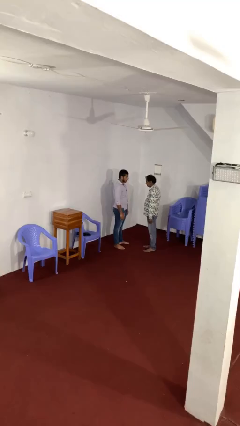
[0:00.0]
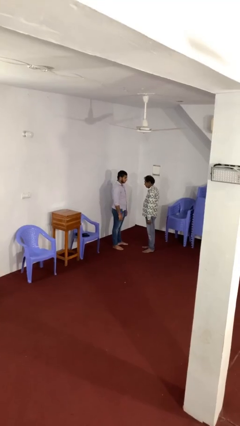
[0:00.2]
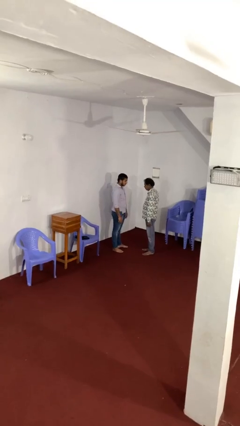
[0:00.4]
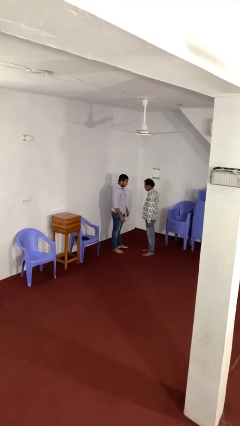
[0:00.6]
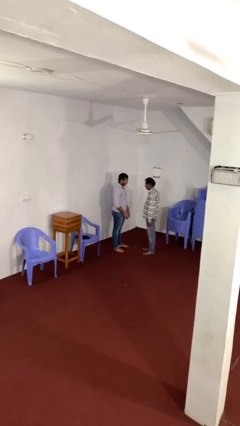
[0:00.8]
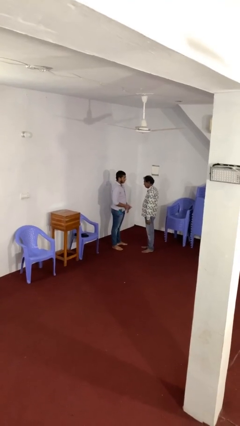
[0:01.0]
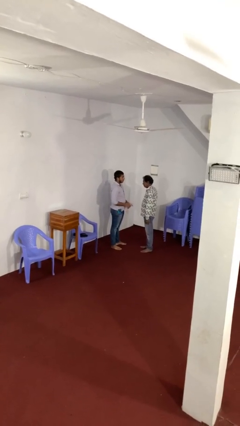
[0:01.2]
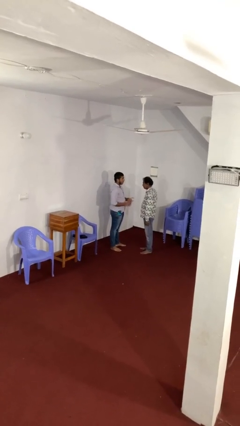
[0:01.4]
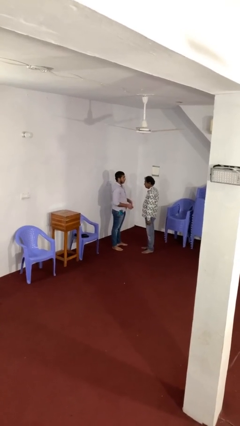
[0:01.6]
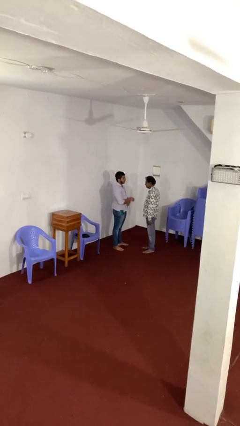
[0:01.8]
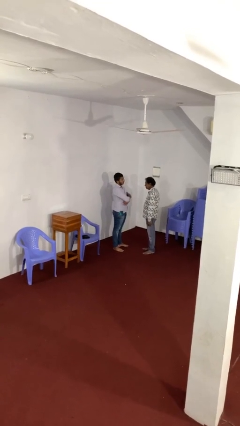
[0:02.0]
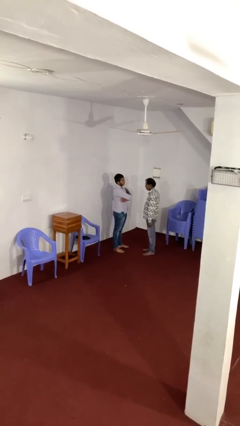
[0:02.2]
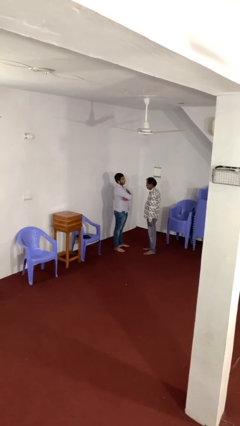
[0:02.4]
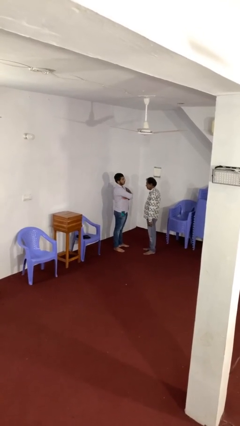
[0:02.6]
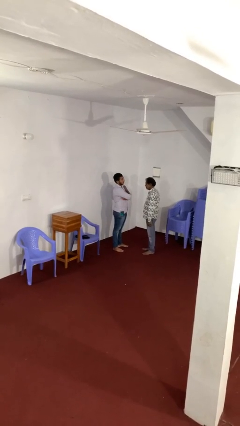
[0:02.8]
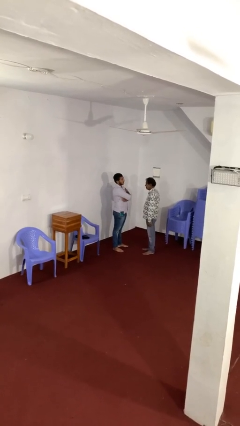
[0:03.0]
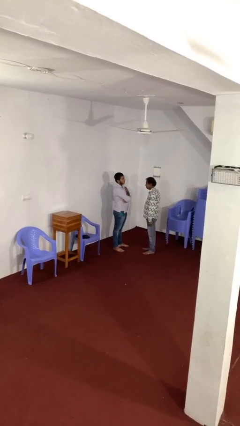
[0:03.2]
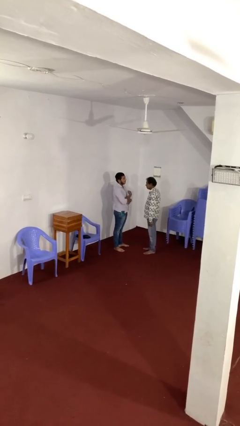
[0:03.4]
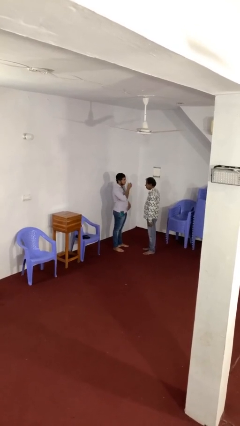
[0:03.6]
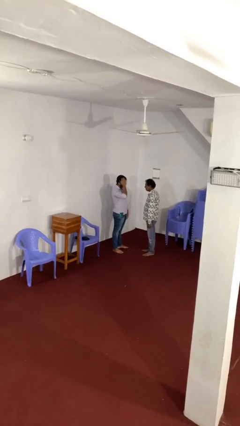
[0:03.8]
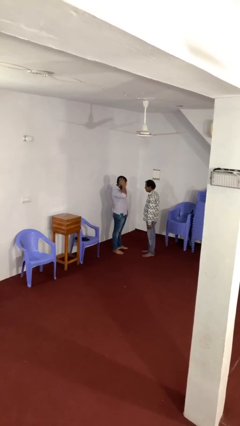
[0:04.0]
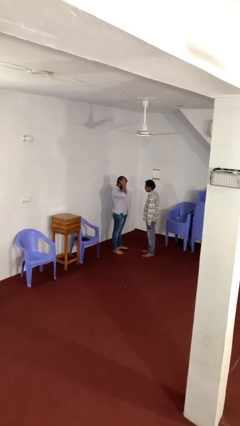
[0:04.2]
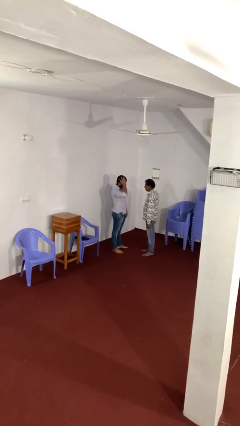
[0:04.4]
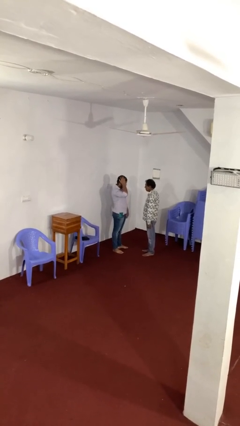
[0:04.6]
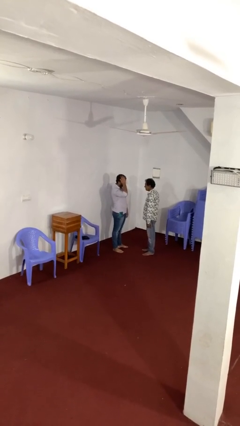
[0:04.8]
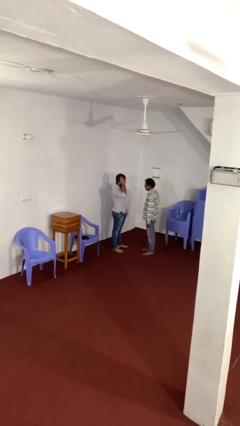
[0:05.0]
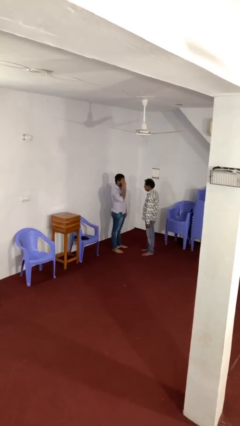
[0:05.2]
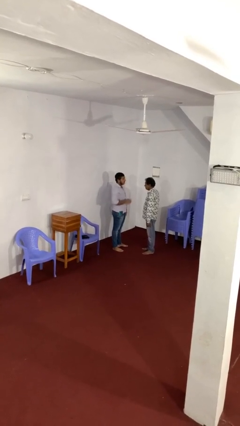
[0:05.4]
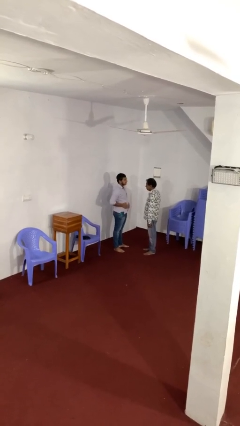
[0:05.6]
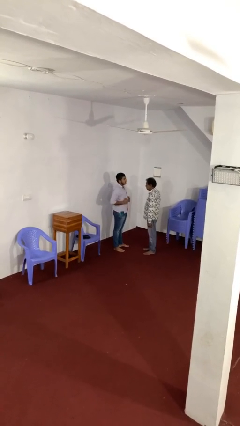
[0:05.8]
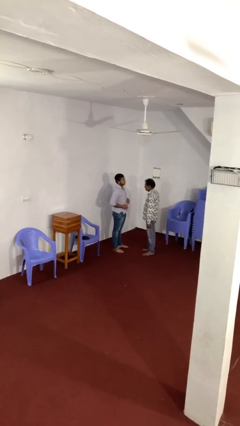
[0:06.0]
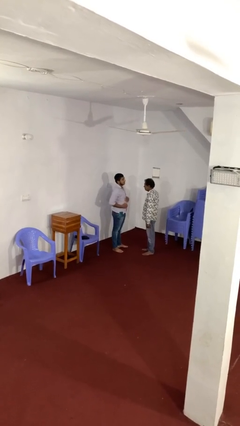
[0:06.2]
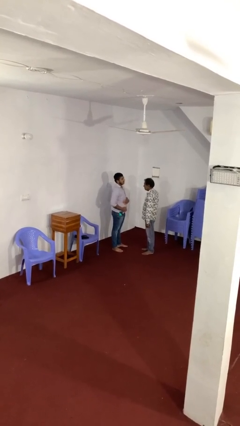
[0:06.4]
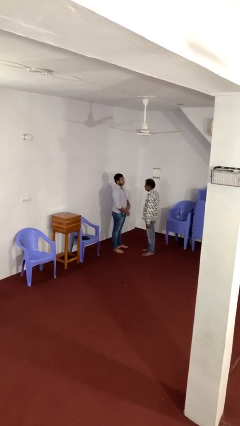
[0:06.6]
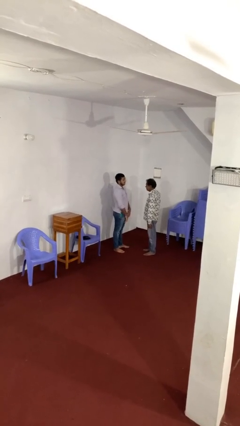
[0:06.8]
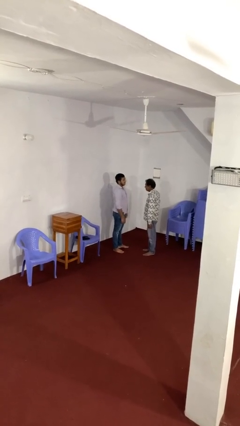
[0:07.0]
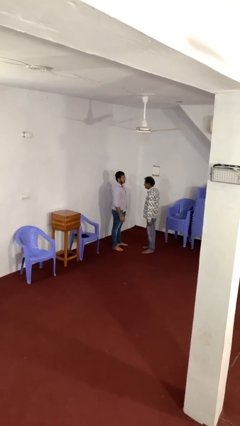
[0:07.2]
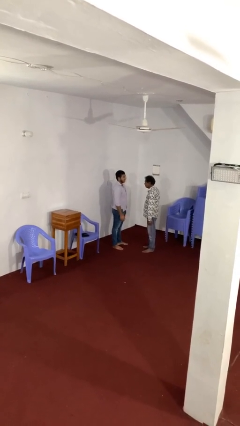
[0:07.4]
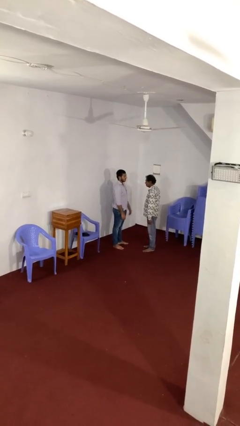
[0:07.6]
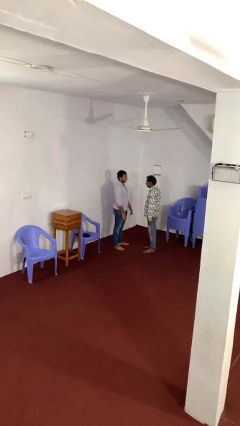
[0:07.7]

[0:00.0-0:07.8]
person talks to person

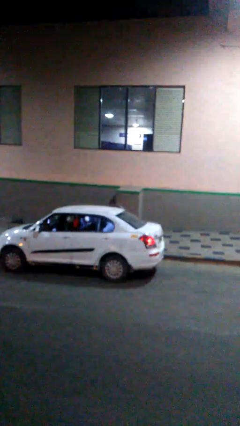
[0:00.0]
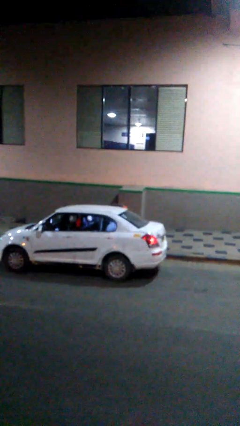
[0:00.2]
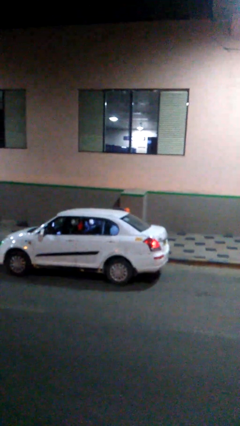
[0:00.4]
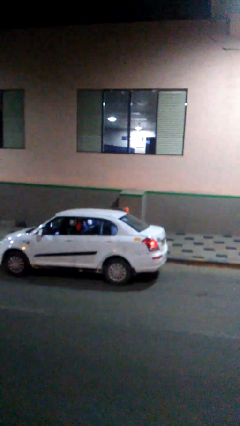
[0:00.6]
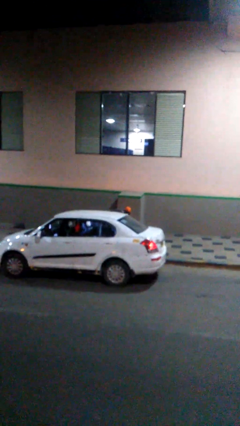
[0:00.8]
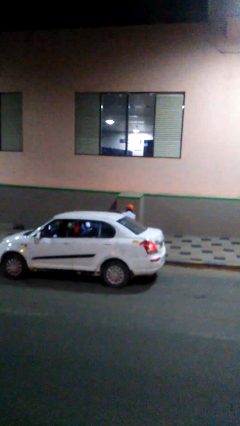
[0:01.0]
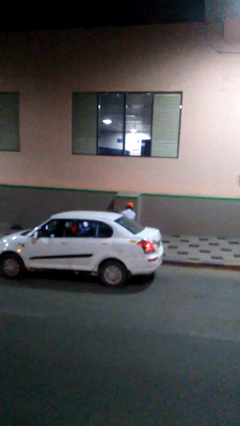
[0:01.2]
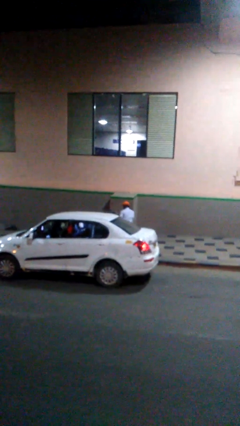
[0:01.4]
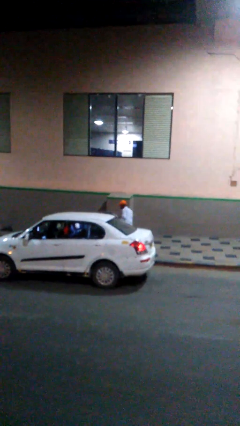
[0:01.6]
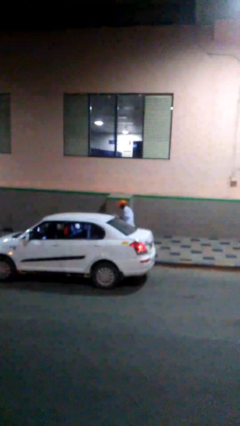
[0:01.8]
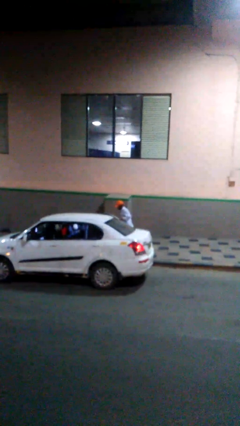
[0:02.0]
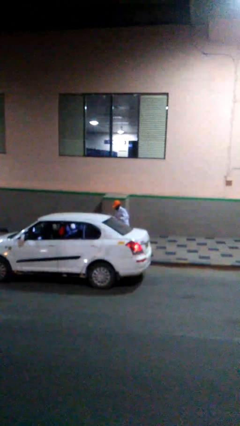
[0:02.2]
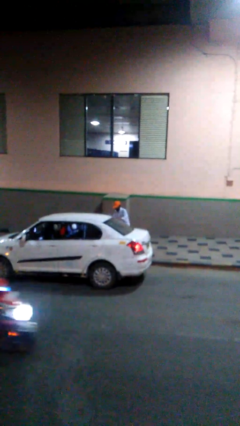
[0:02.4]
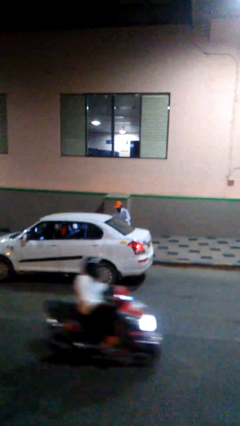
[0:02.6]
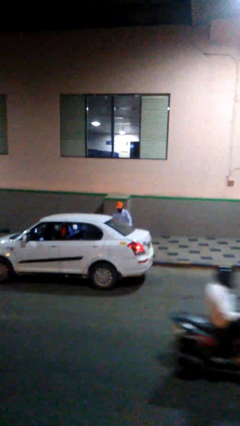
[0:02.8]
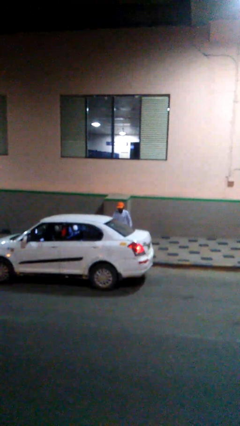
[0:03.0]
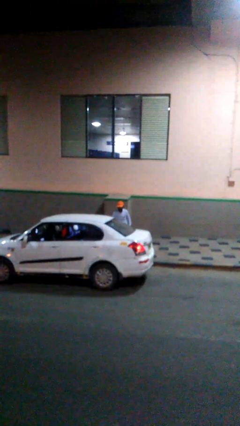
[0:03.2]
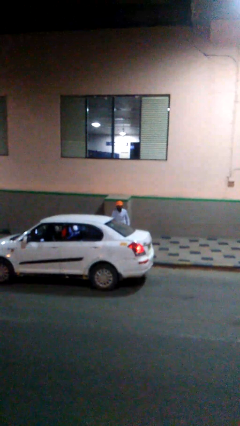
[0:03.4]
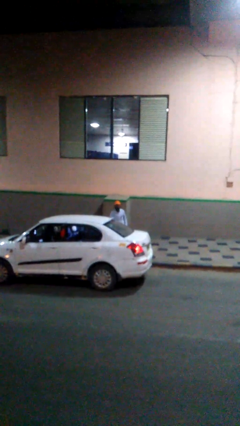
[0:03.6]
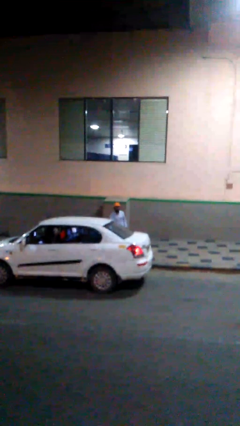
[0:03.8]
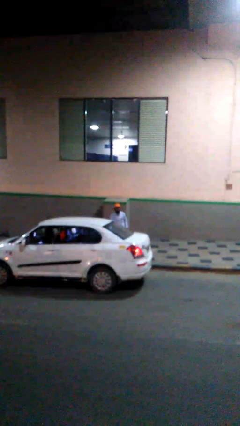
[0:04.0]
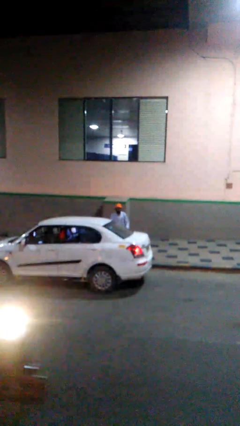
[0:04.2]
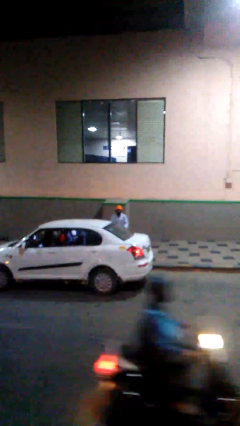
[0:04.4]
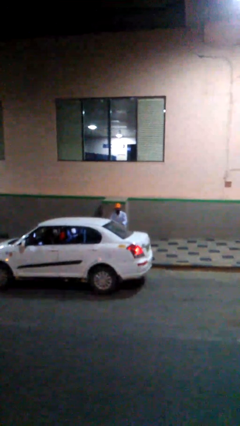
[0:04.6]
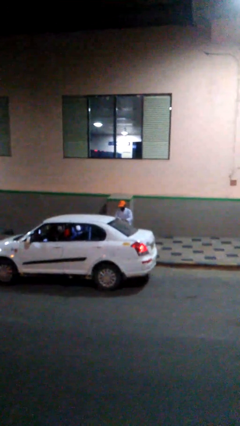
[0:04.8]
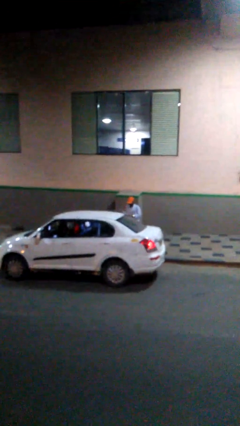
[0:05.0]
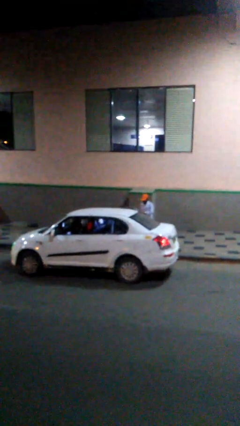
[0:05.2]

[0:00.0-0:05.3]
person exits car

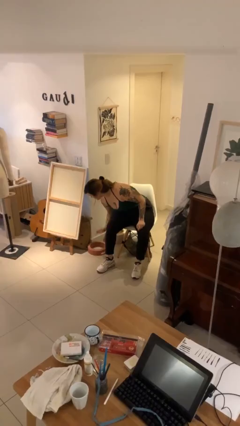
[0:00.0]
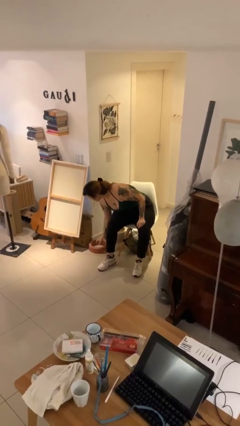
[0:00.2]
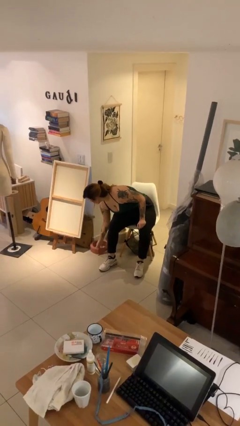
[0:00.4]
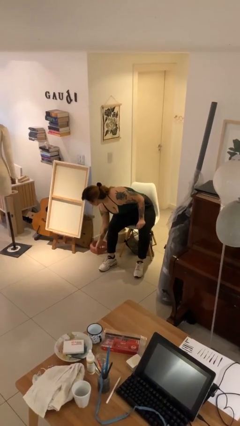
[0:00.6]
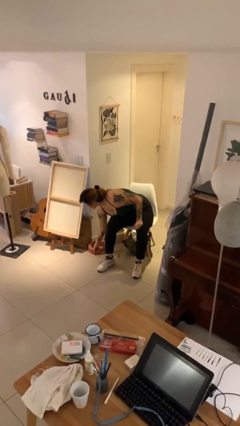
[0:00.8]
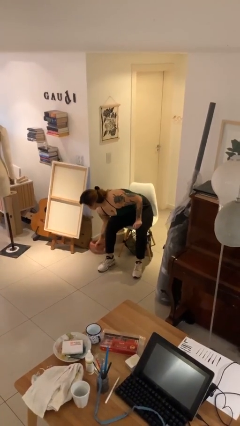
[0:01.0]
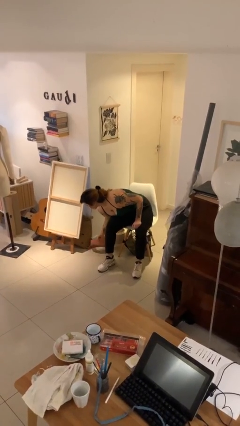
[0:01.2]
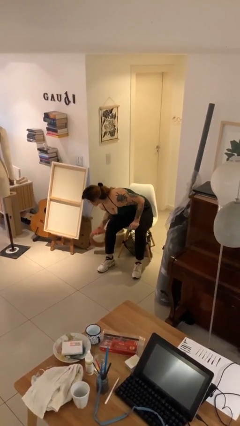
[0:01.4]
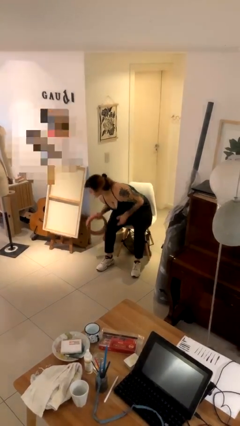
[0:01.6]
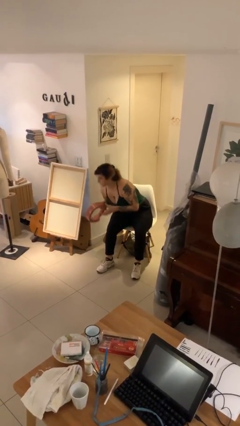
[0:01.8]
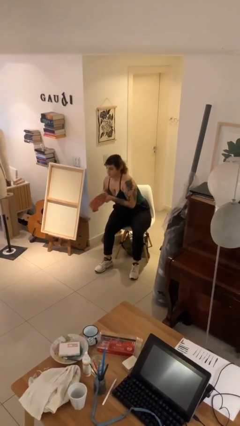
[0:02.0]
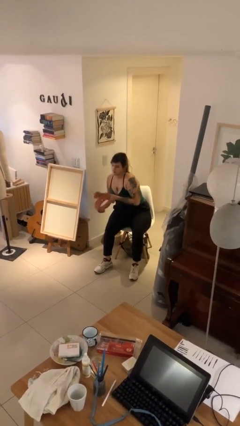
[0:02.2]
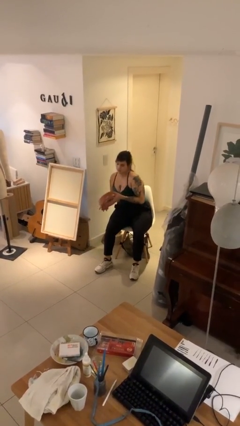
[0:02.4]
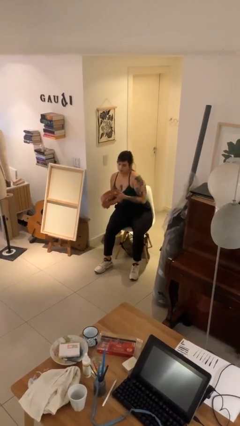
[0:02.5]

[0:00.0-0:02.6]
person picks up object from floor

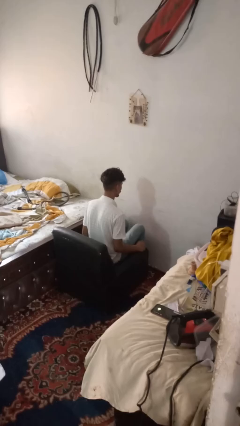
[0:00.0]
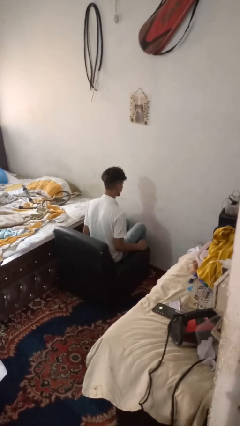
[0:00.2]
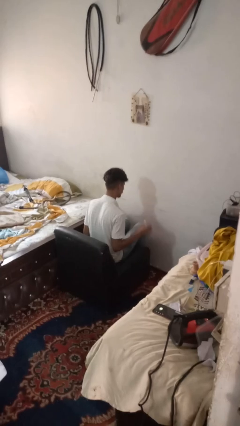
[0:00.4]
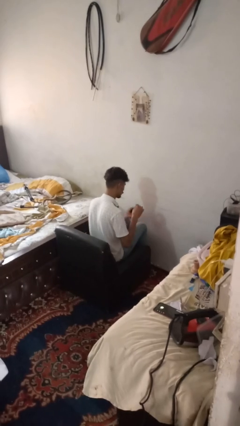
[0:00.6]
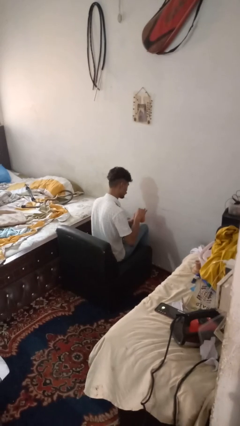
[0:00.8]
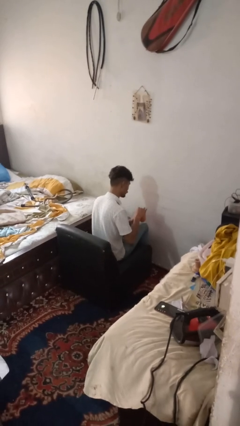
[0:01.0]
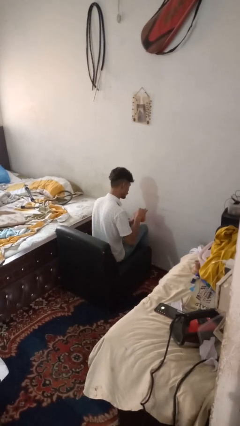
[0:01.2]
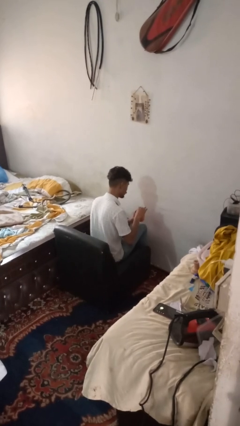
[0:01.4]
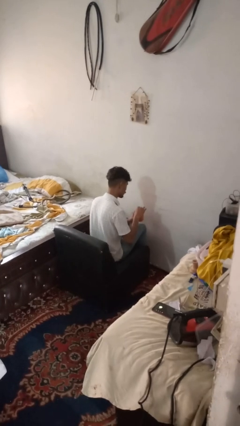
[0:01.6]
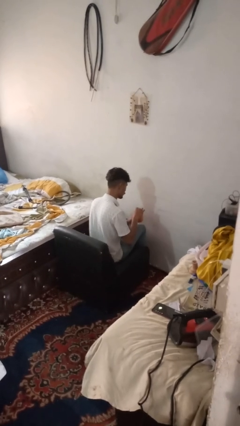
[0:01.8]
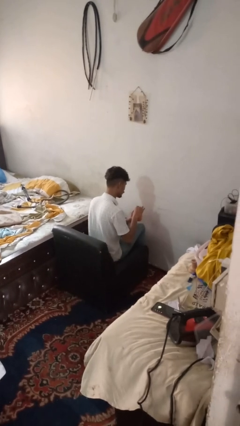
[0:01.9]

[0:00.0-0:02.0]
person stirs mug
